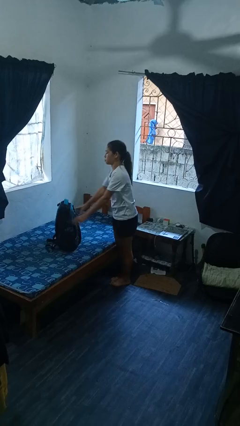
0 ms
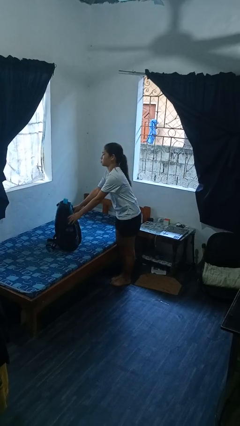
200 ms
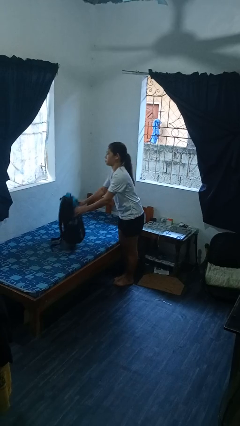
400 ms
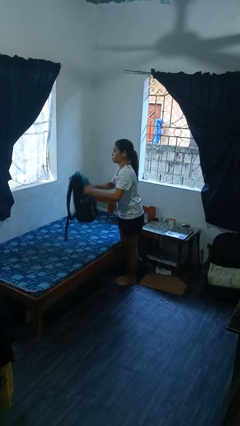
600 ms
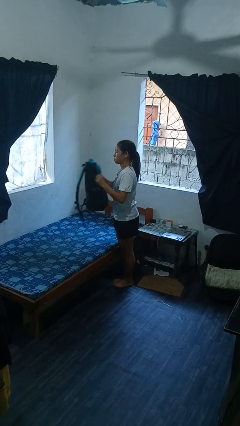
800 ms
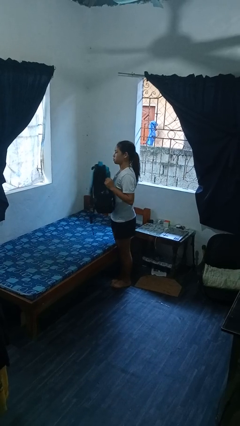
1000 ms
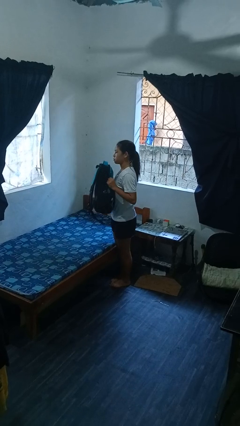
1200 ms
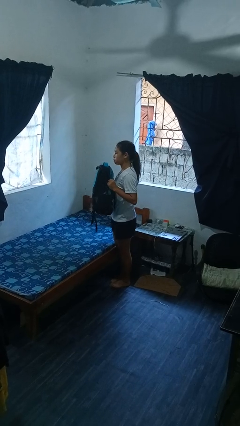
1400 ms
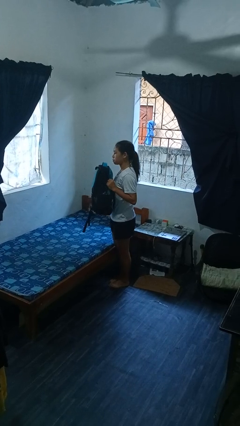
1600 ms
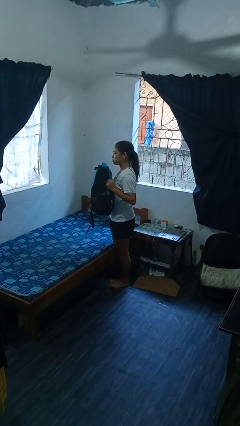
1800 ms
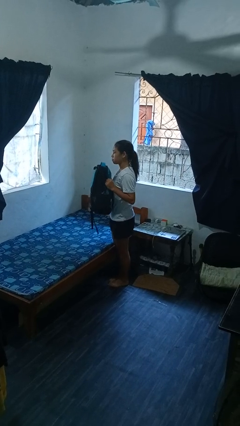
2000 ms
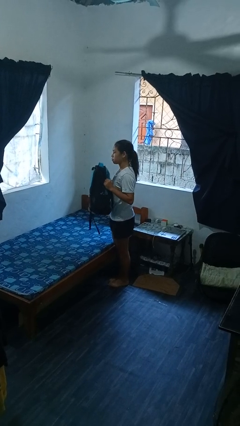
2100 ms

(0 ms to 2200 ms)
person picks up object from bed

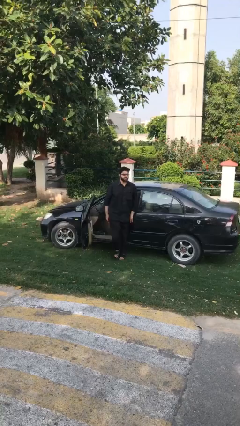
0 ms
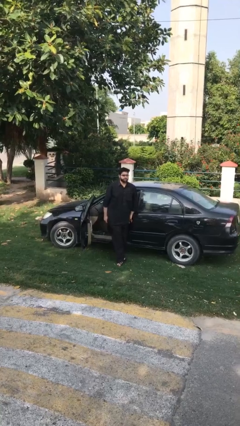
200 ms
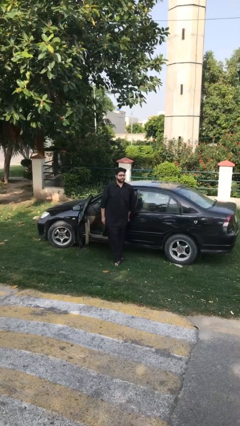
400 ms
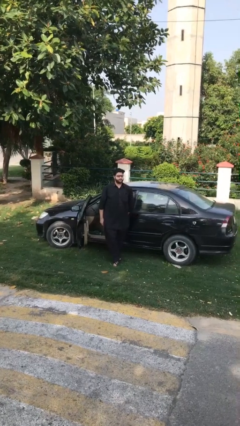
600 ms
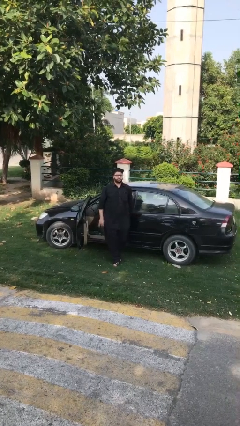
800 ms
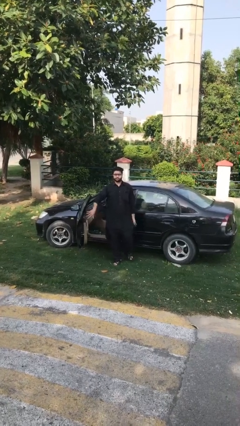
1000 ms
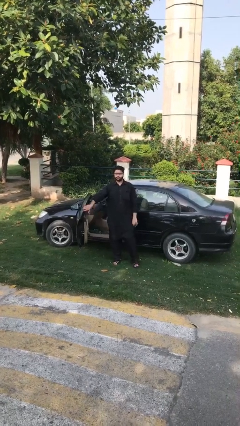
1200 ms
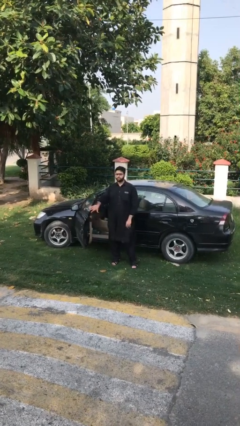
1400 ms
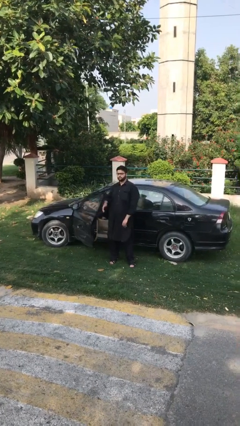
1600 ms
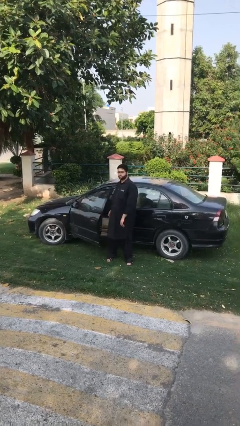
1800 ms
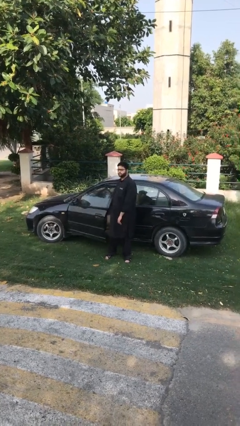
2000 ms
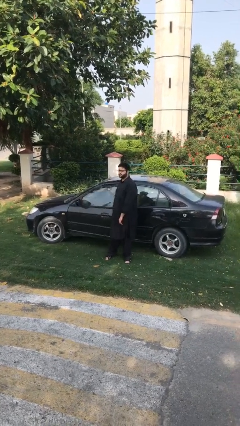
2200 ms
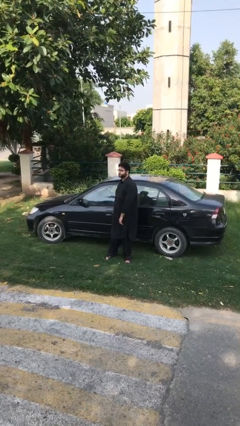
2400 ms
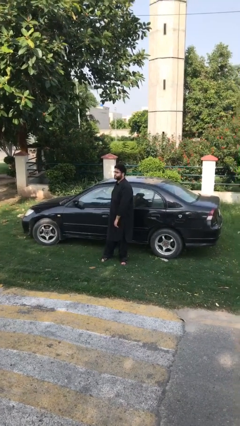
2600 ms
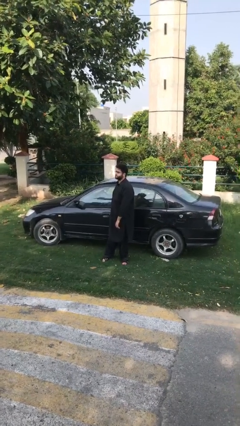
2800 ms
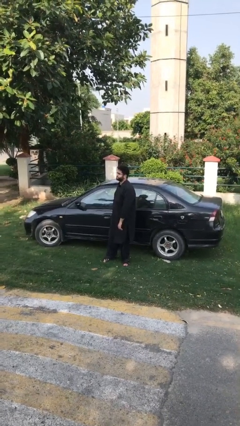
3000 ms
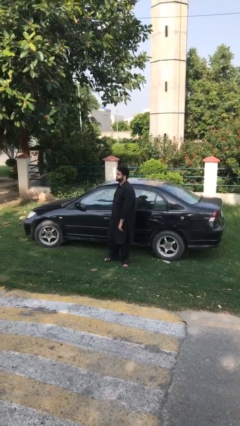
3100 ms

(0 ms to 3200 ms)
person closes car door

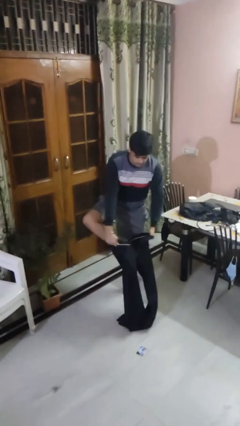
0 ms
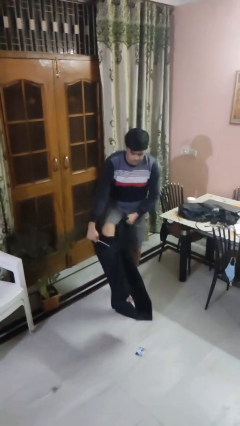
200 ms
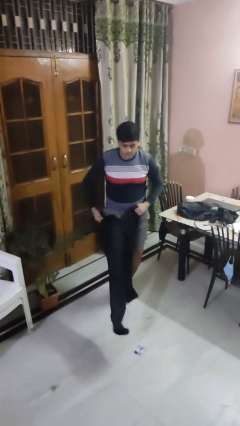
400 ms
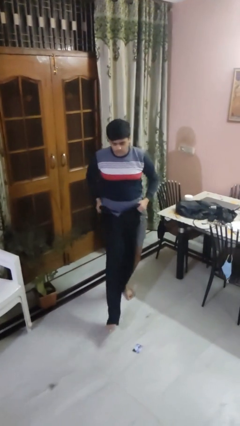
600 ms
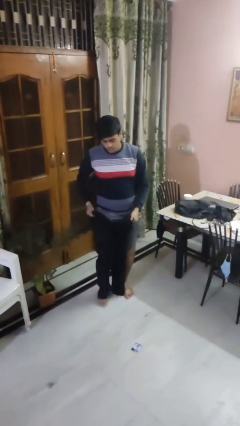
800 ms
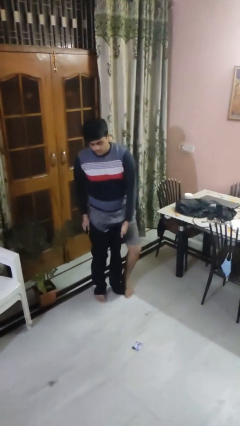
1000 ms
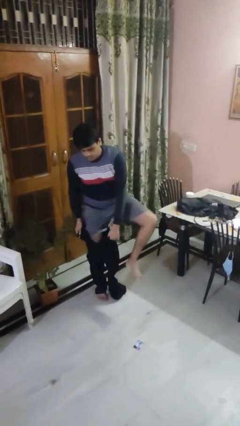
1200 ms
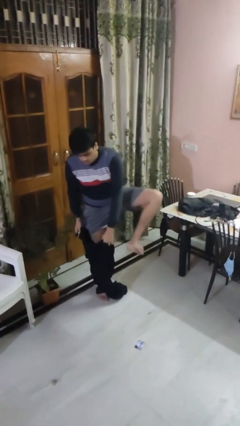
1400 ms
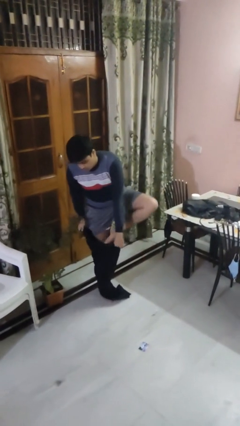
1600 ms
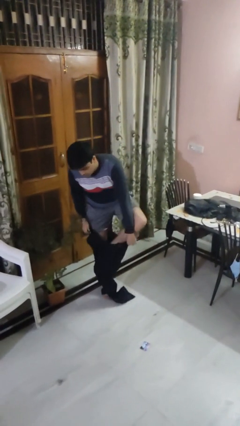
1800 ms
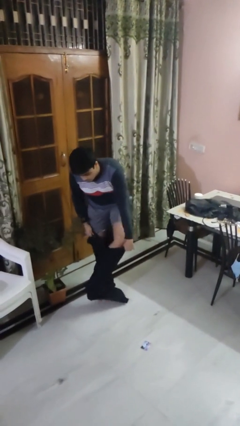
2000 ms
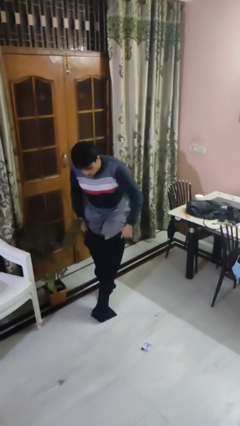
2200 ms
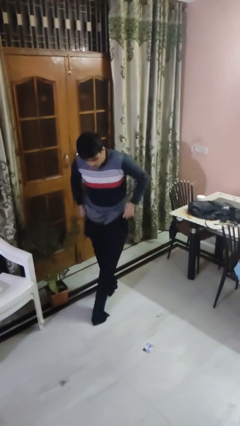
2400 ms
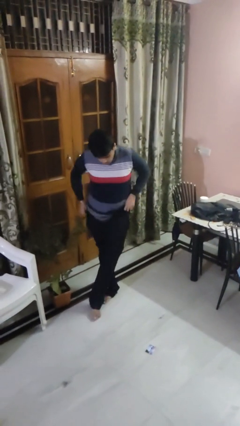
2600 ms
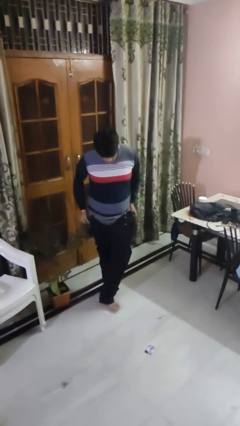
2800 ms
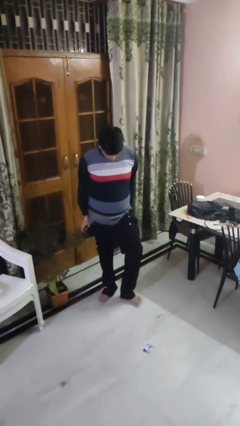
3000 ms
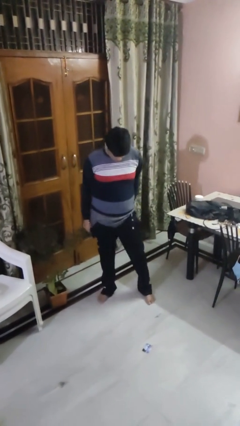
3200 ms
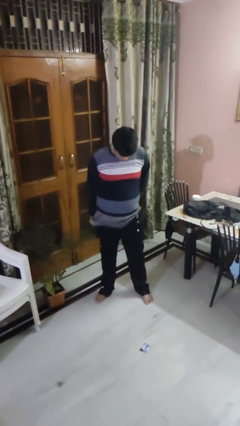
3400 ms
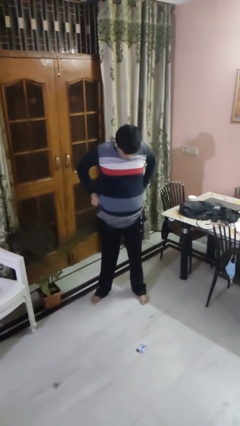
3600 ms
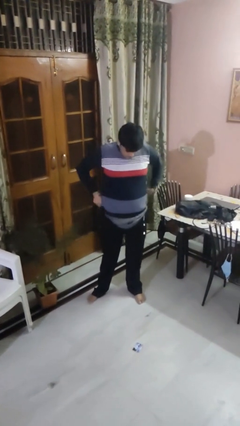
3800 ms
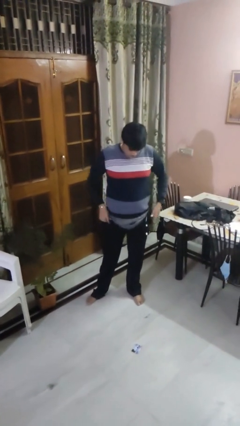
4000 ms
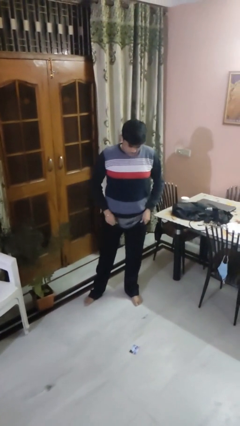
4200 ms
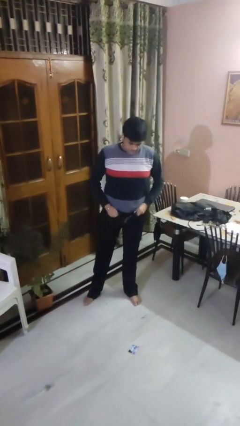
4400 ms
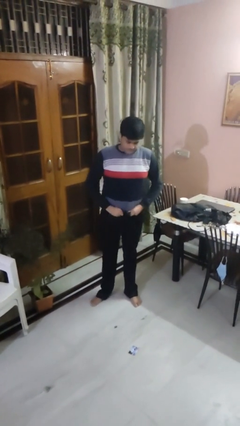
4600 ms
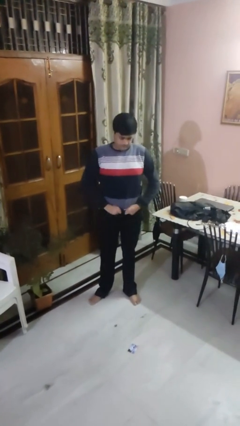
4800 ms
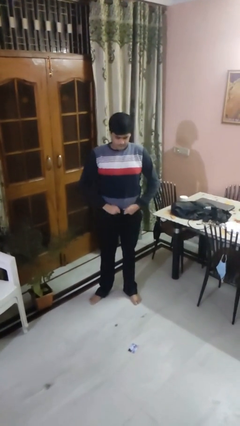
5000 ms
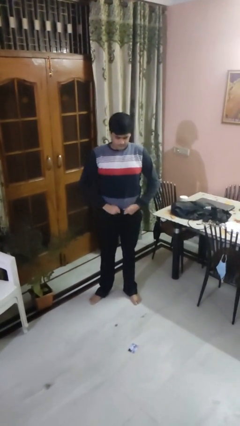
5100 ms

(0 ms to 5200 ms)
person puts on pants

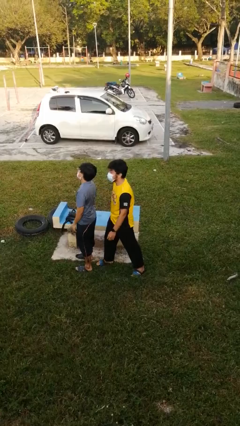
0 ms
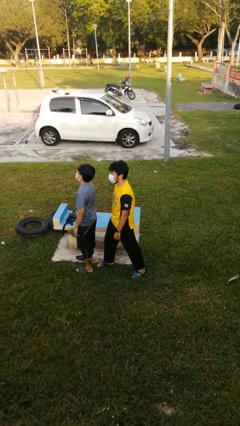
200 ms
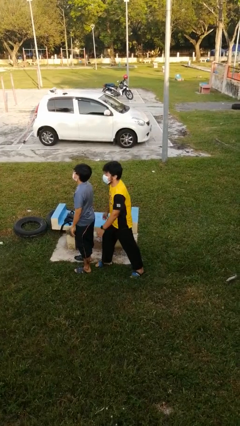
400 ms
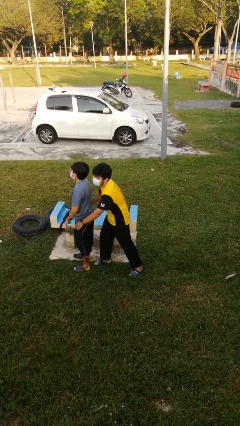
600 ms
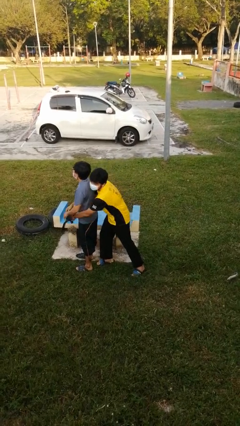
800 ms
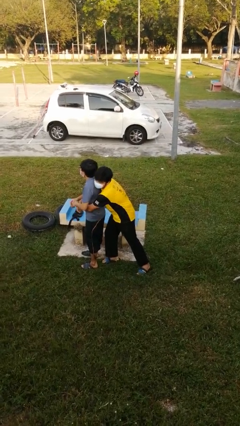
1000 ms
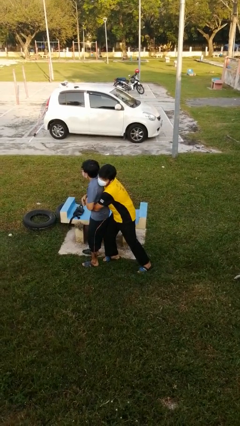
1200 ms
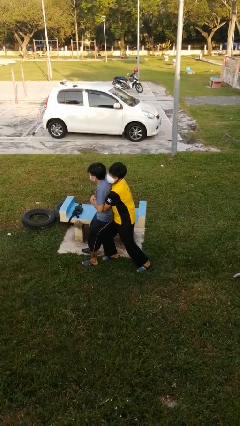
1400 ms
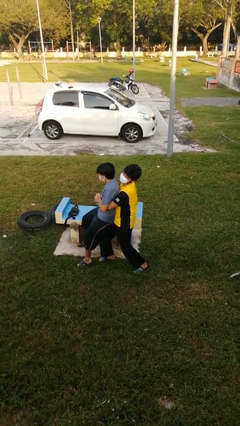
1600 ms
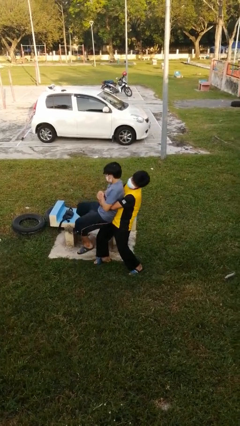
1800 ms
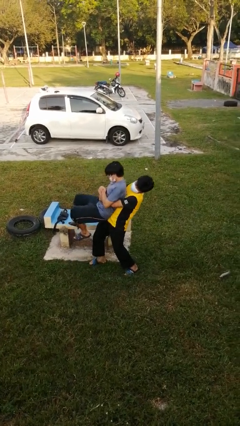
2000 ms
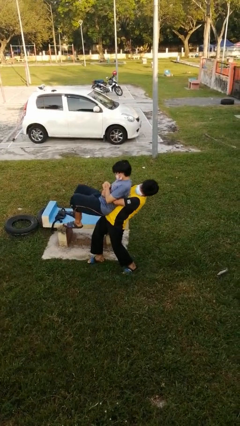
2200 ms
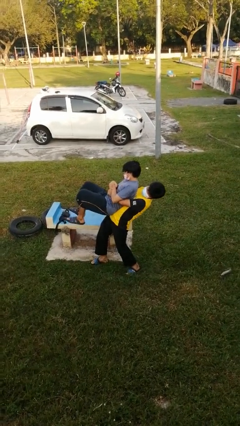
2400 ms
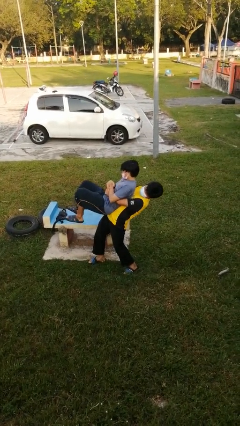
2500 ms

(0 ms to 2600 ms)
person picks up person

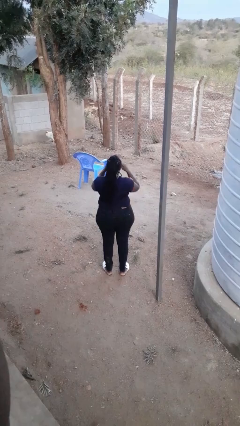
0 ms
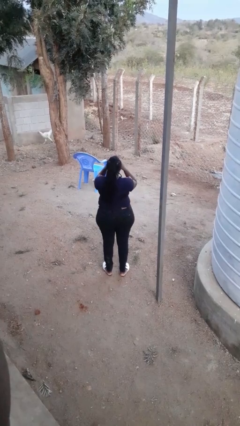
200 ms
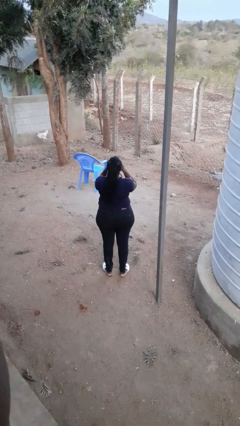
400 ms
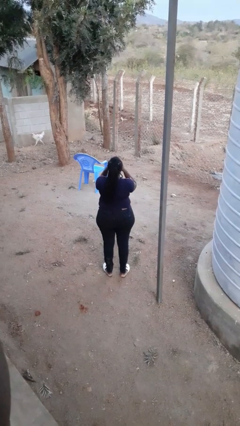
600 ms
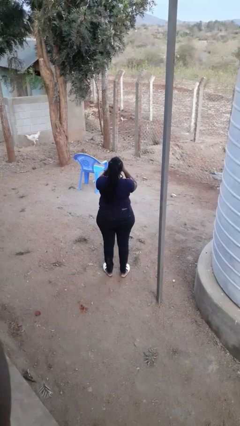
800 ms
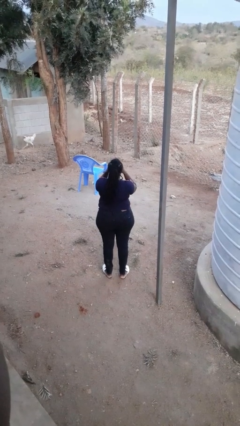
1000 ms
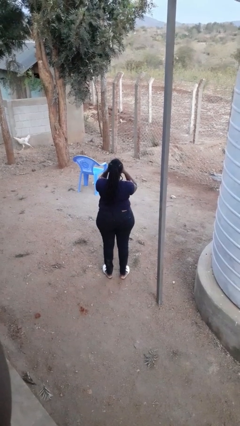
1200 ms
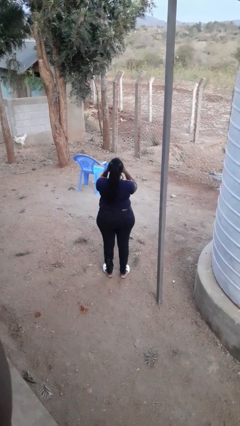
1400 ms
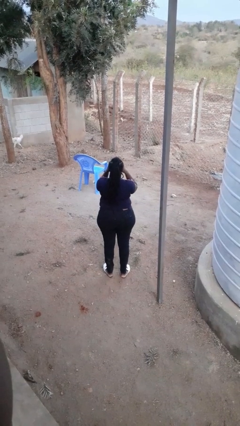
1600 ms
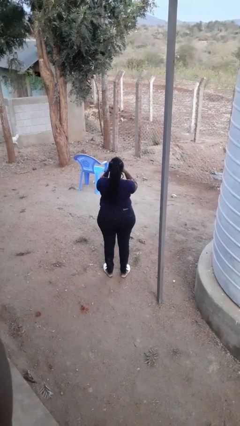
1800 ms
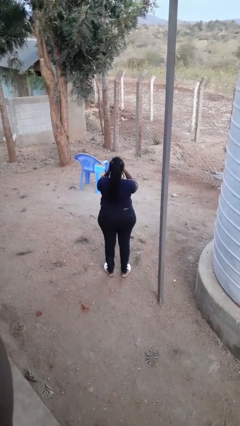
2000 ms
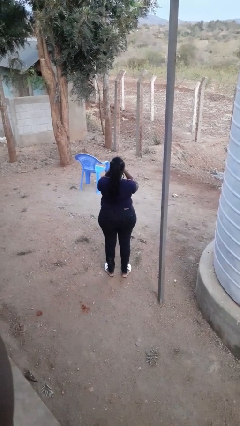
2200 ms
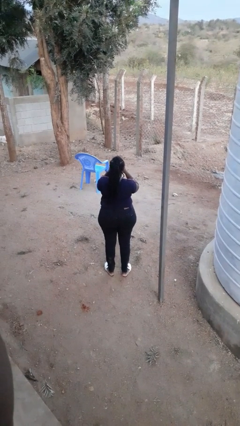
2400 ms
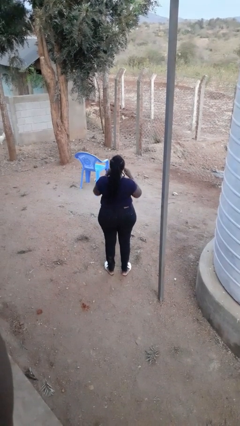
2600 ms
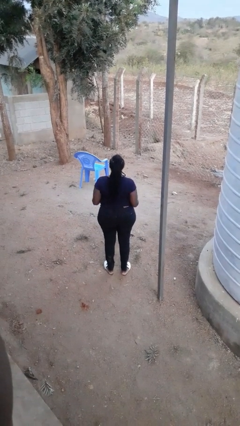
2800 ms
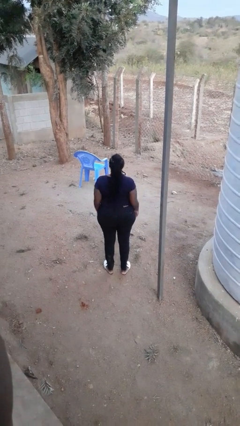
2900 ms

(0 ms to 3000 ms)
person rubs eyes

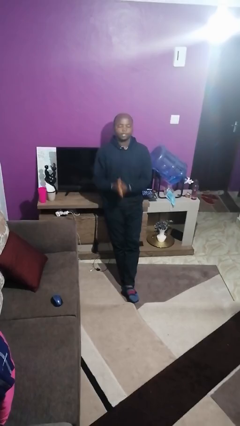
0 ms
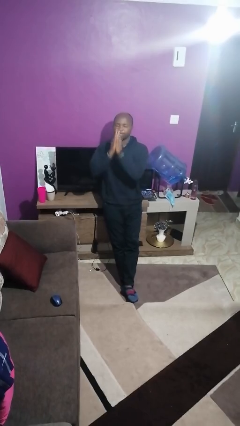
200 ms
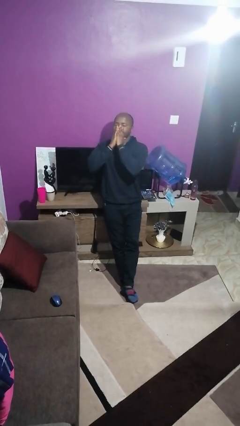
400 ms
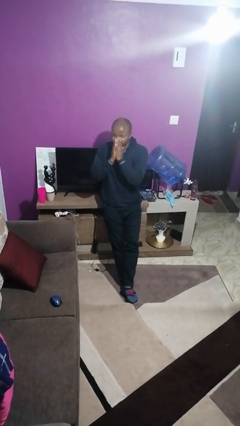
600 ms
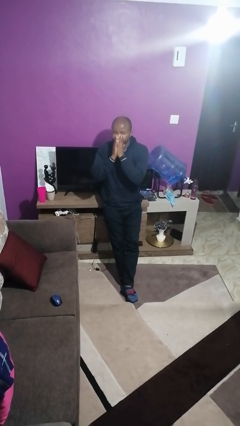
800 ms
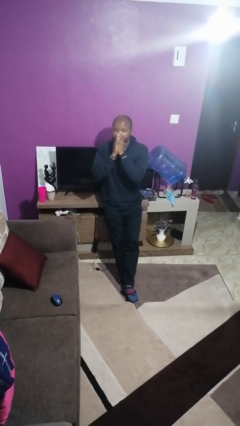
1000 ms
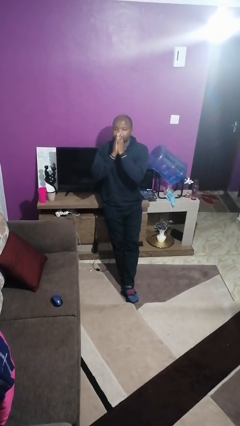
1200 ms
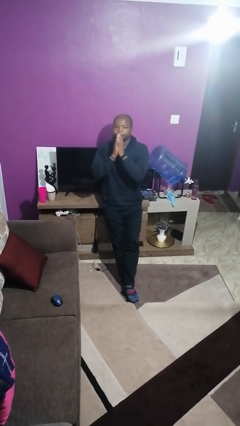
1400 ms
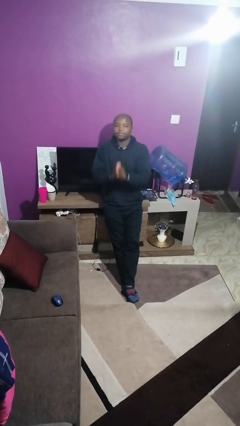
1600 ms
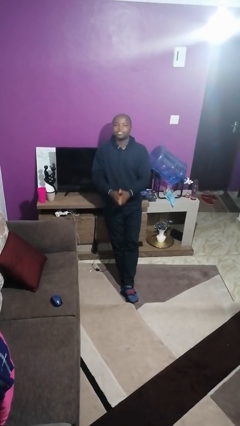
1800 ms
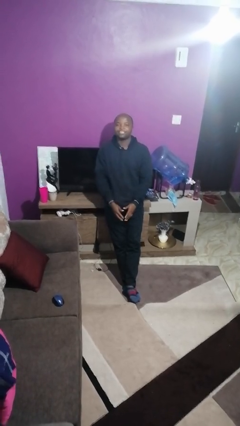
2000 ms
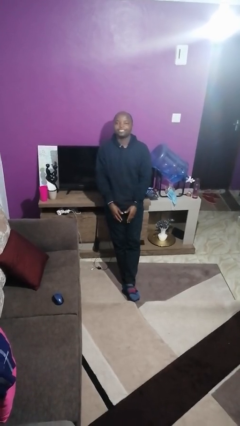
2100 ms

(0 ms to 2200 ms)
person sneezes into hand
